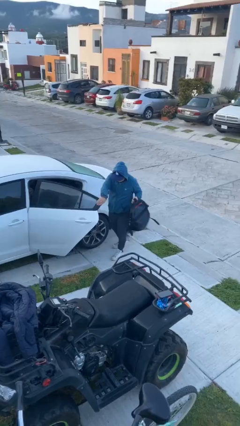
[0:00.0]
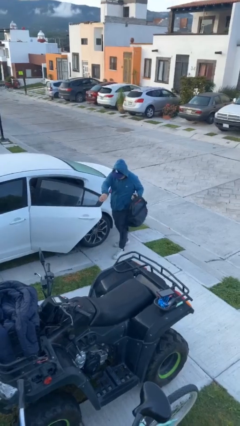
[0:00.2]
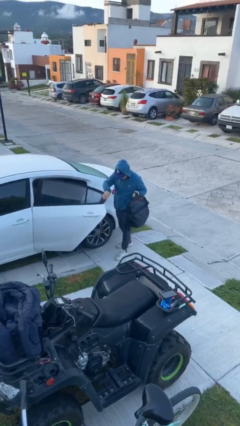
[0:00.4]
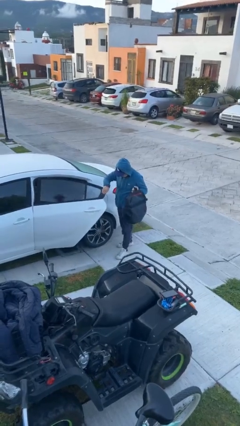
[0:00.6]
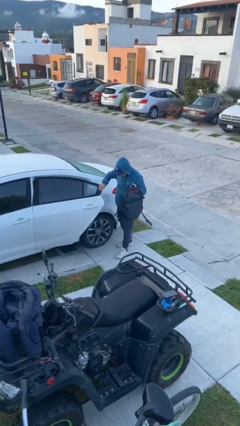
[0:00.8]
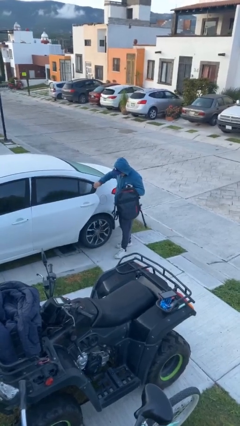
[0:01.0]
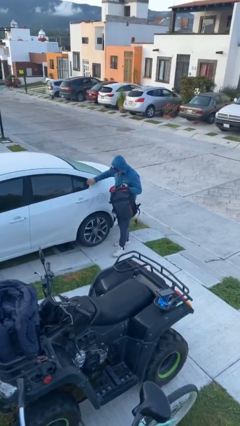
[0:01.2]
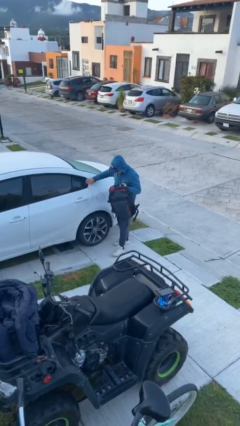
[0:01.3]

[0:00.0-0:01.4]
person closes car door

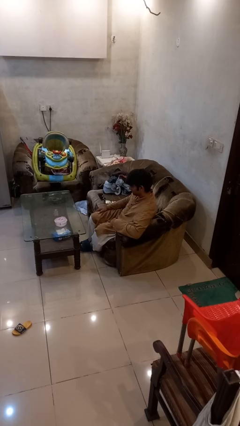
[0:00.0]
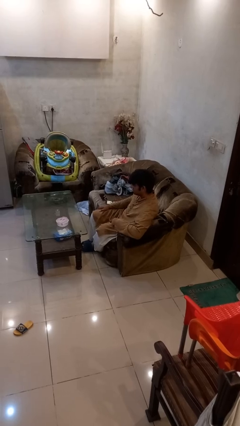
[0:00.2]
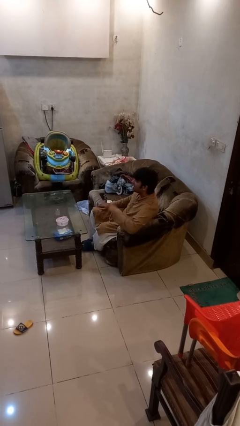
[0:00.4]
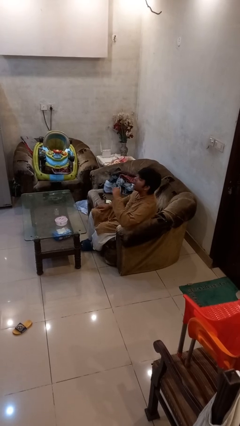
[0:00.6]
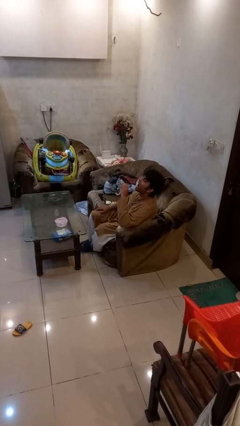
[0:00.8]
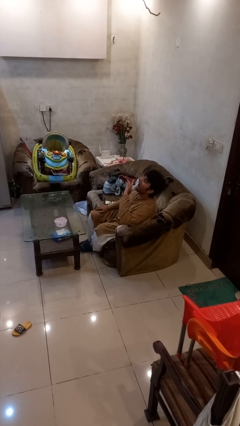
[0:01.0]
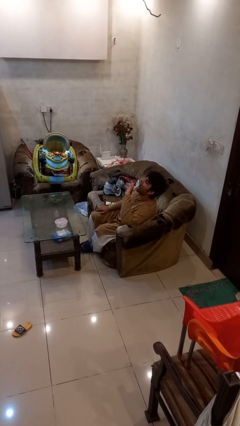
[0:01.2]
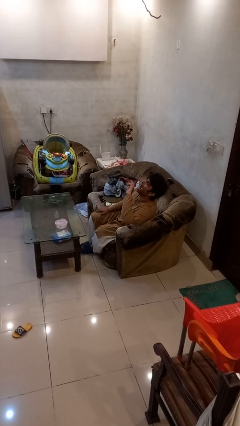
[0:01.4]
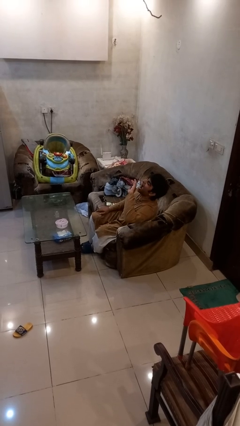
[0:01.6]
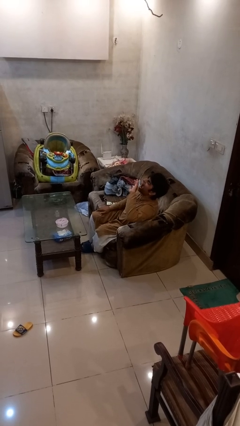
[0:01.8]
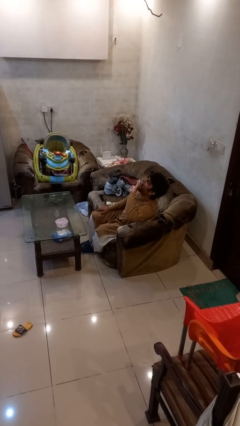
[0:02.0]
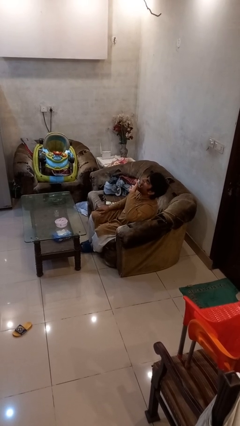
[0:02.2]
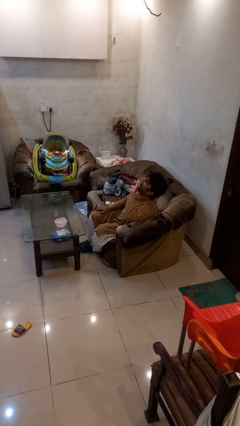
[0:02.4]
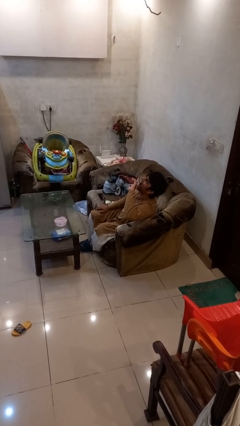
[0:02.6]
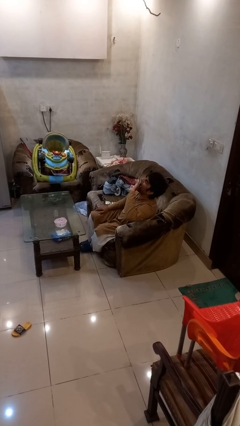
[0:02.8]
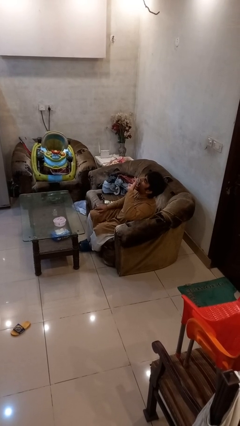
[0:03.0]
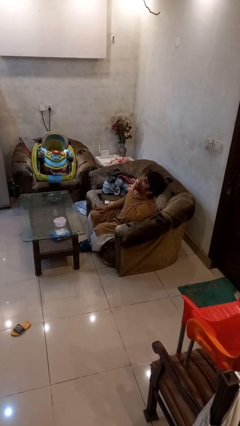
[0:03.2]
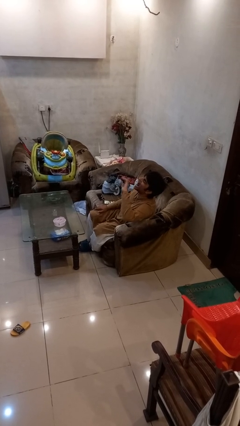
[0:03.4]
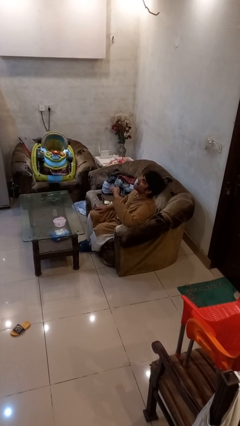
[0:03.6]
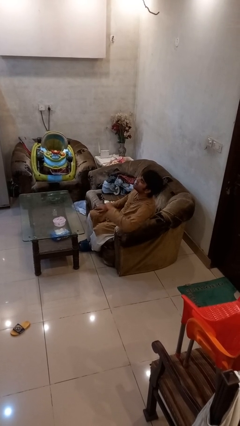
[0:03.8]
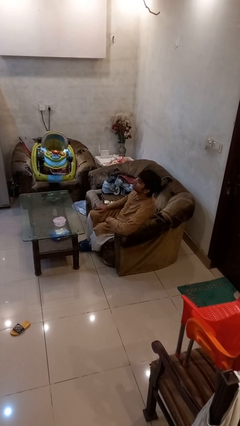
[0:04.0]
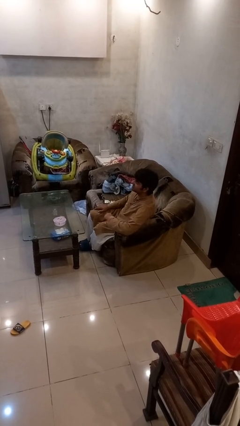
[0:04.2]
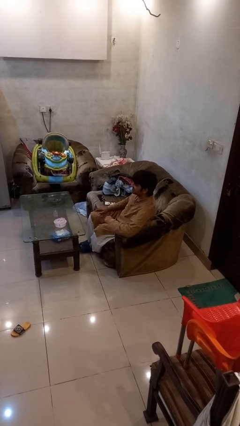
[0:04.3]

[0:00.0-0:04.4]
person yawns

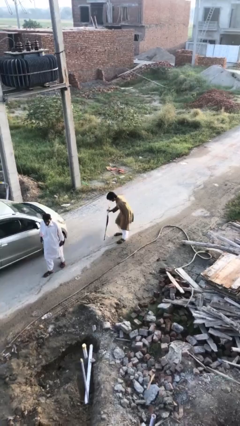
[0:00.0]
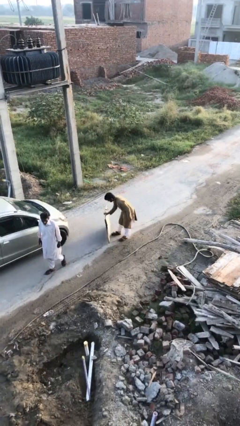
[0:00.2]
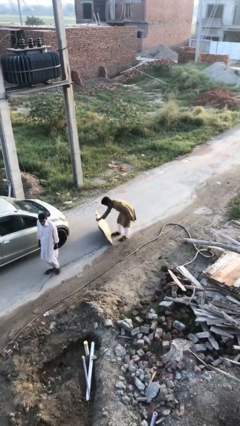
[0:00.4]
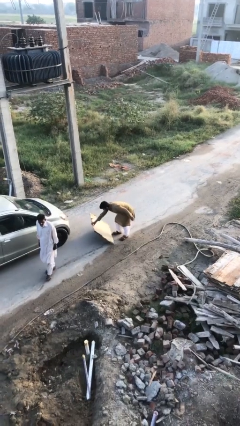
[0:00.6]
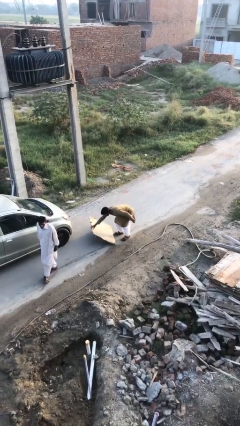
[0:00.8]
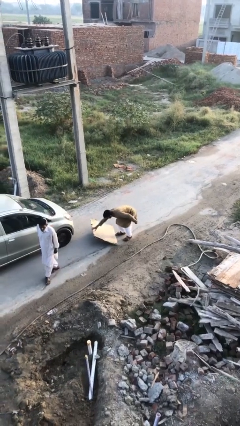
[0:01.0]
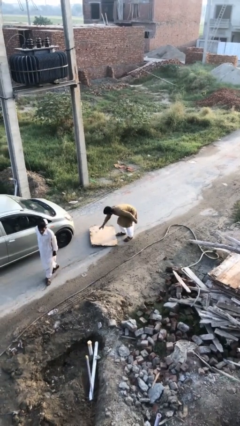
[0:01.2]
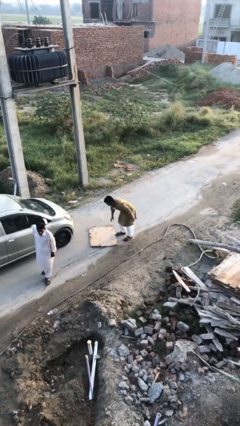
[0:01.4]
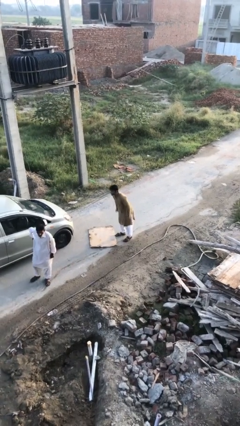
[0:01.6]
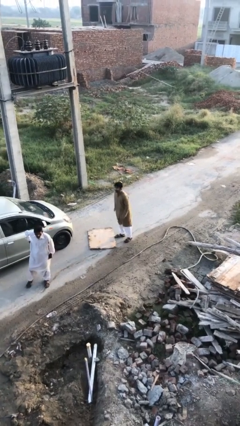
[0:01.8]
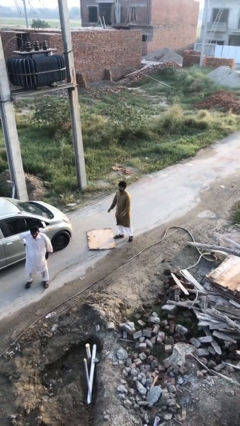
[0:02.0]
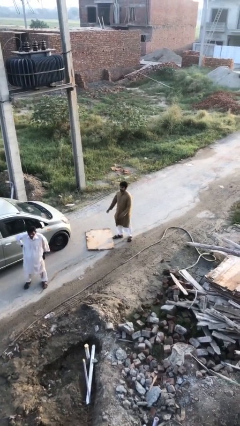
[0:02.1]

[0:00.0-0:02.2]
person puts down object on floor

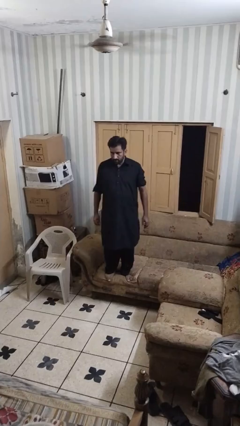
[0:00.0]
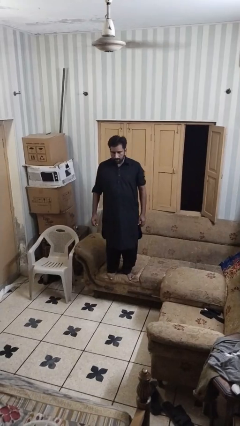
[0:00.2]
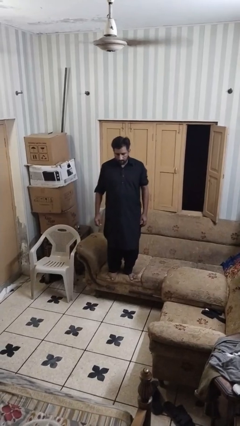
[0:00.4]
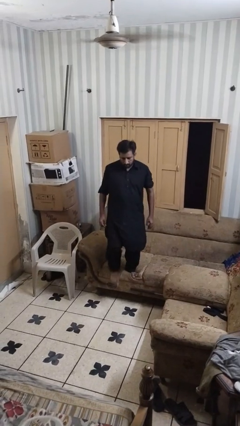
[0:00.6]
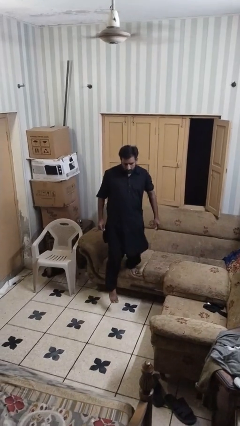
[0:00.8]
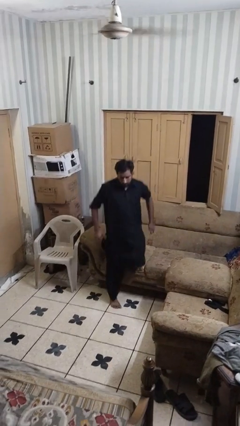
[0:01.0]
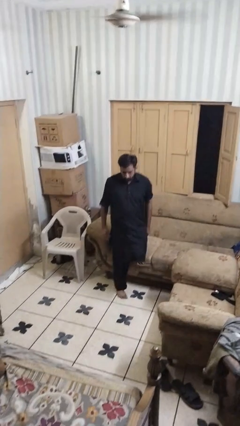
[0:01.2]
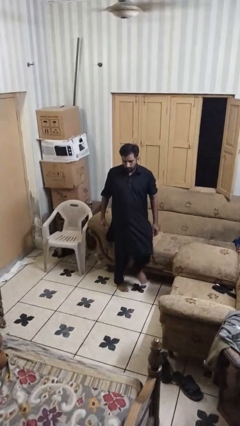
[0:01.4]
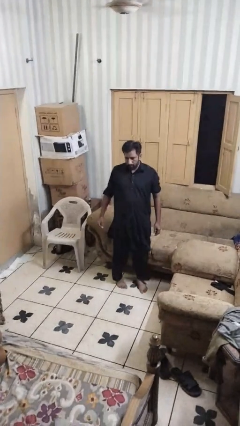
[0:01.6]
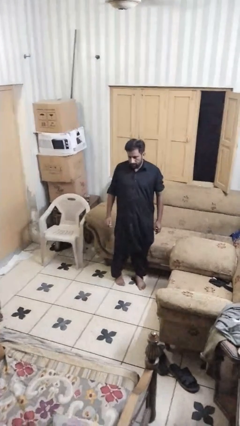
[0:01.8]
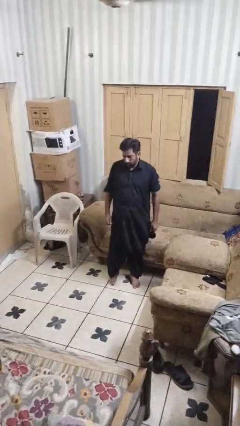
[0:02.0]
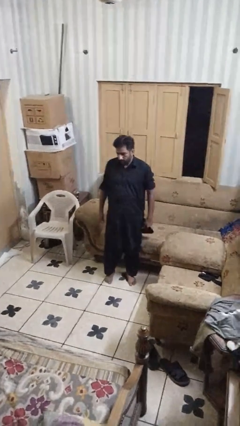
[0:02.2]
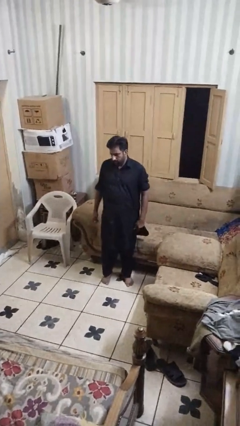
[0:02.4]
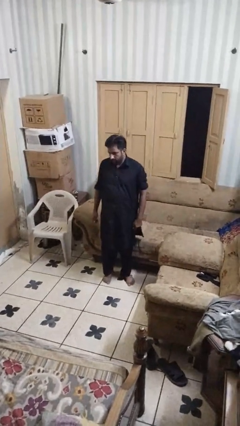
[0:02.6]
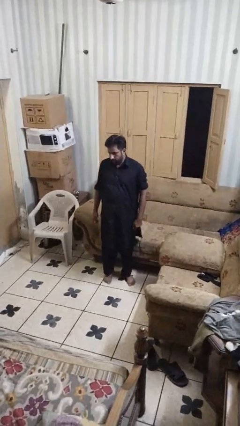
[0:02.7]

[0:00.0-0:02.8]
person climbs off couch

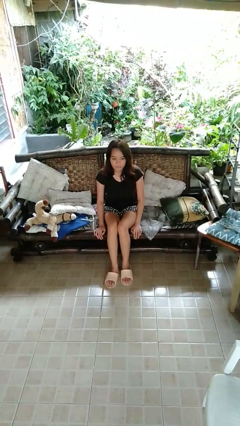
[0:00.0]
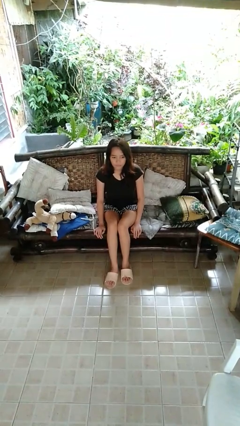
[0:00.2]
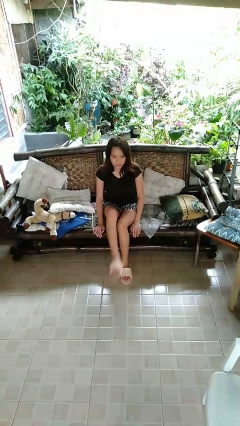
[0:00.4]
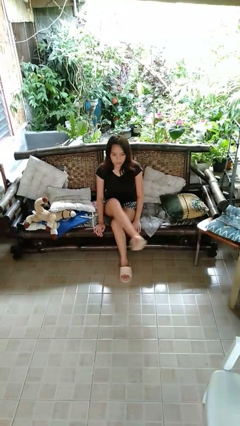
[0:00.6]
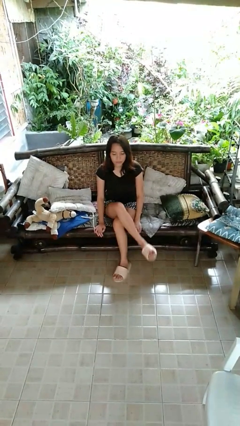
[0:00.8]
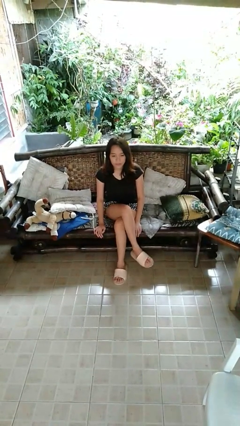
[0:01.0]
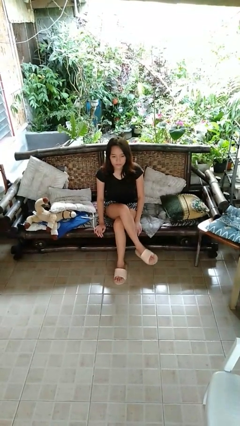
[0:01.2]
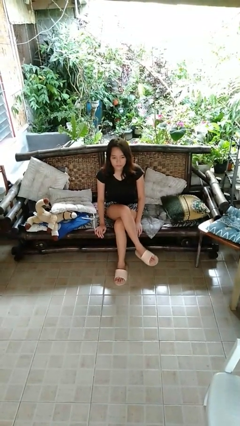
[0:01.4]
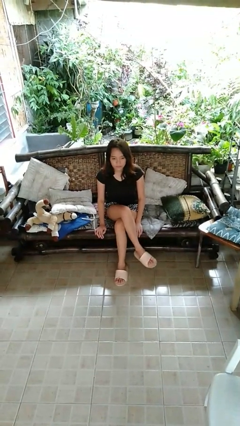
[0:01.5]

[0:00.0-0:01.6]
person crosses legs

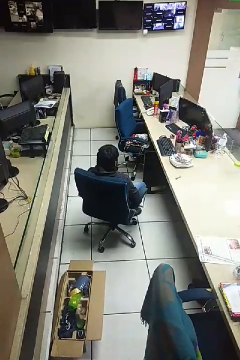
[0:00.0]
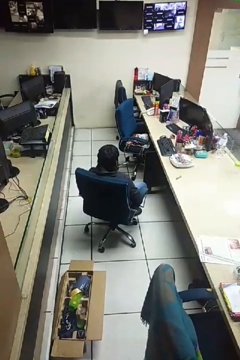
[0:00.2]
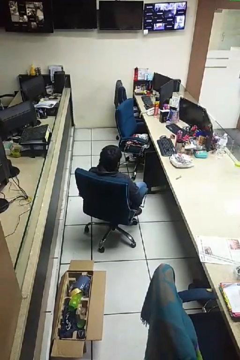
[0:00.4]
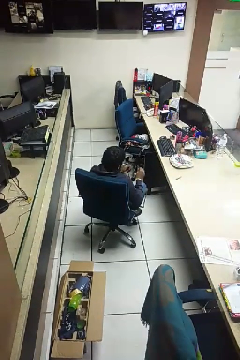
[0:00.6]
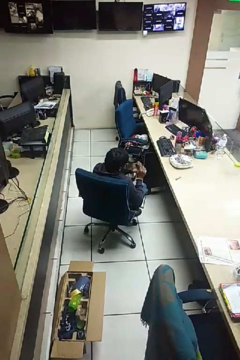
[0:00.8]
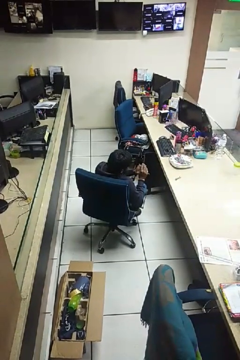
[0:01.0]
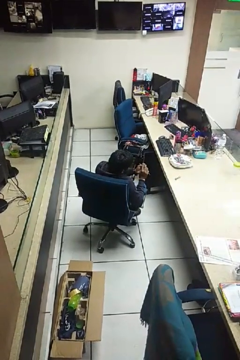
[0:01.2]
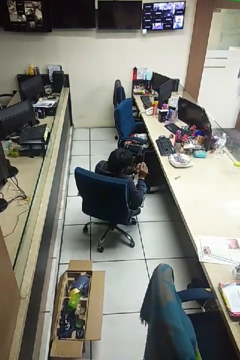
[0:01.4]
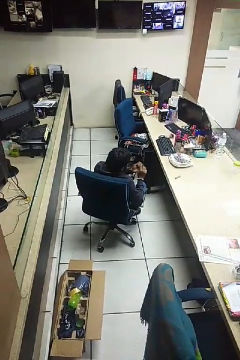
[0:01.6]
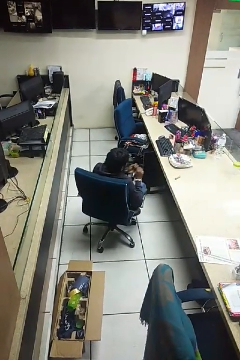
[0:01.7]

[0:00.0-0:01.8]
person files fingernails

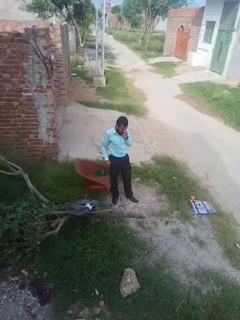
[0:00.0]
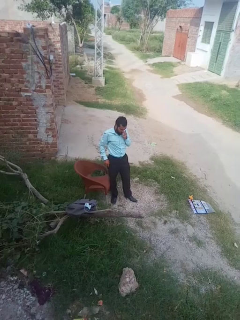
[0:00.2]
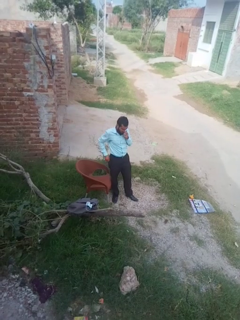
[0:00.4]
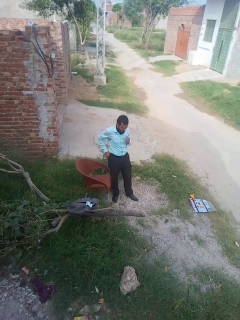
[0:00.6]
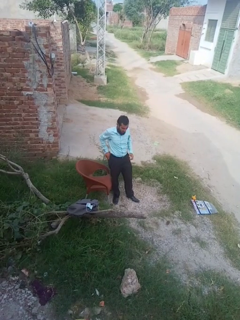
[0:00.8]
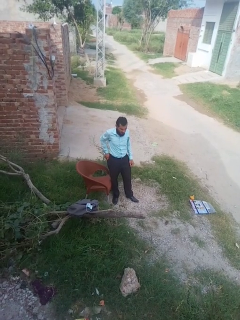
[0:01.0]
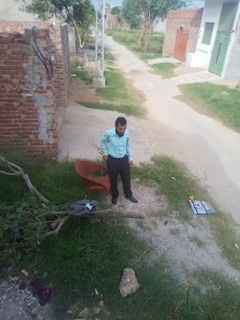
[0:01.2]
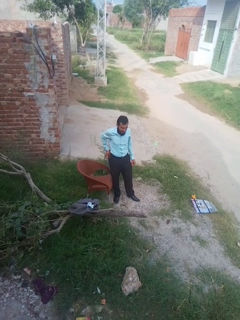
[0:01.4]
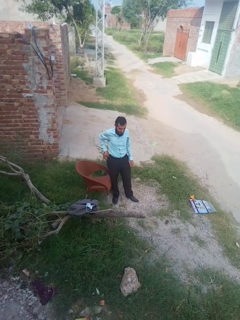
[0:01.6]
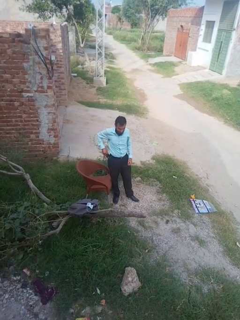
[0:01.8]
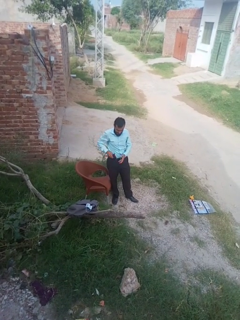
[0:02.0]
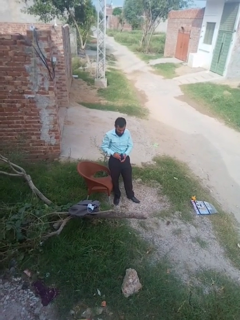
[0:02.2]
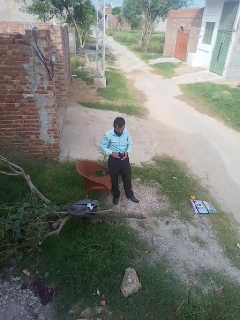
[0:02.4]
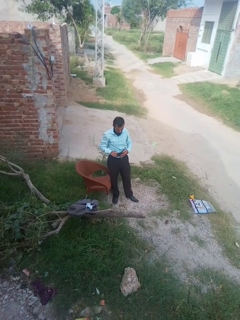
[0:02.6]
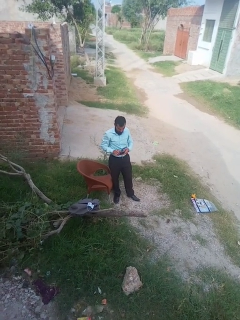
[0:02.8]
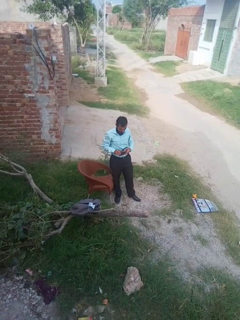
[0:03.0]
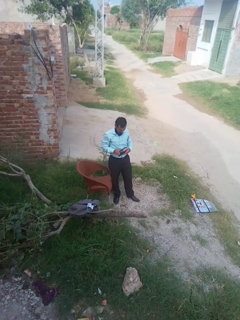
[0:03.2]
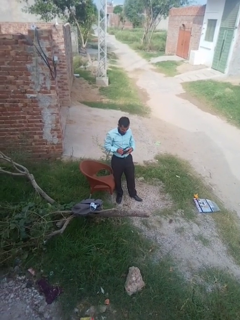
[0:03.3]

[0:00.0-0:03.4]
person searches in purse

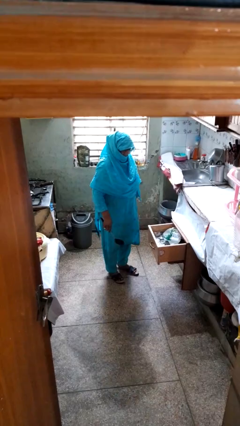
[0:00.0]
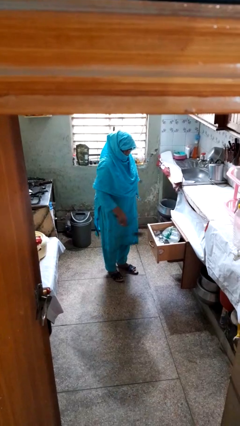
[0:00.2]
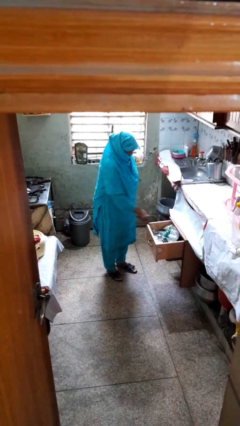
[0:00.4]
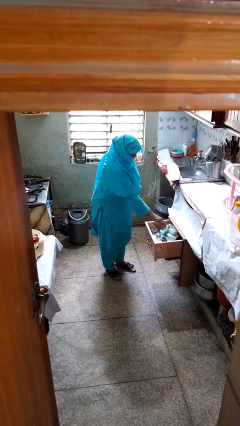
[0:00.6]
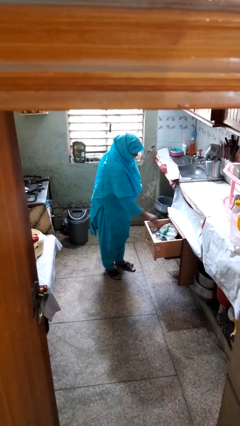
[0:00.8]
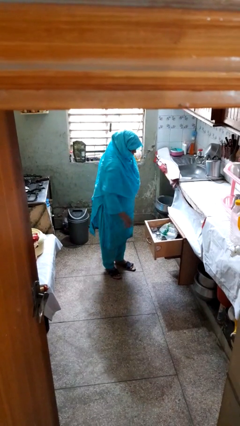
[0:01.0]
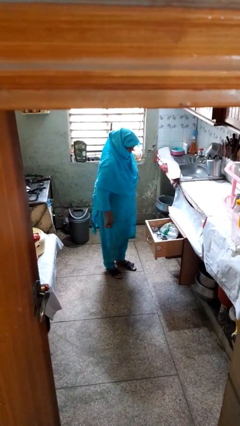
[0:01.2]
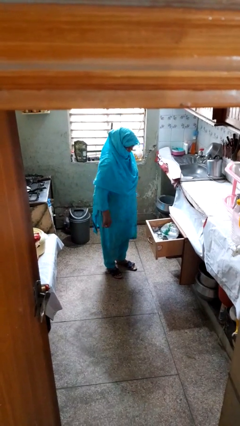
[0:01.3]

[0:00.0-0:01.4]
person puts object into kitchen drawer
